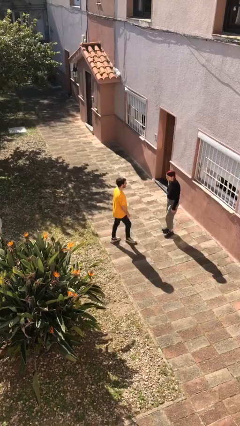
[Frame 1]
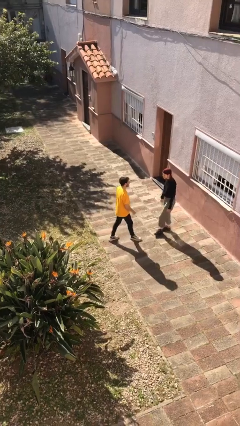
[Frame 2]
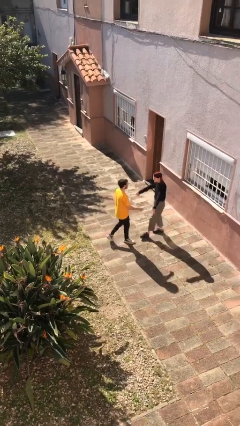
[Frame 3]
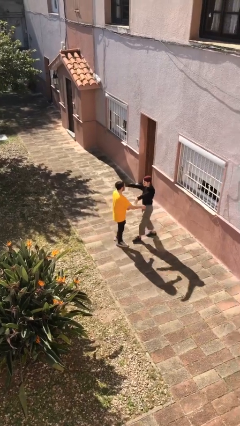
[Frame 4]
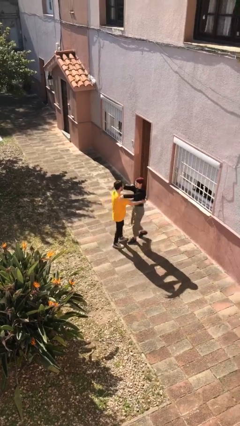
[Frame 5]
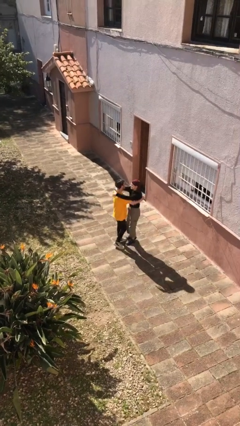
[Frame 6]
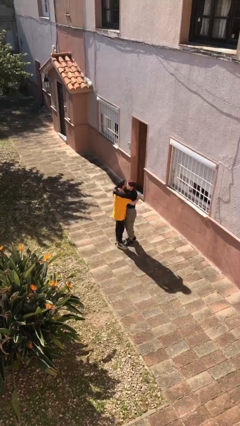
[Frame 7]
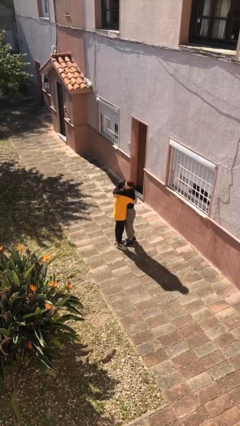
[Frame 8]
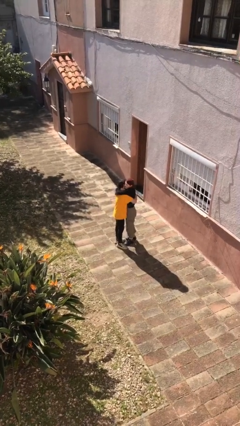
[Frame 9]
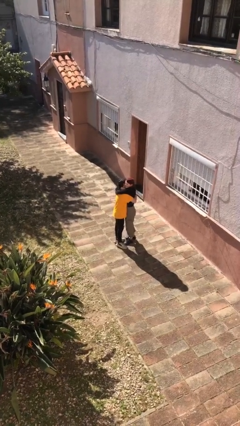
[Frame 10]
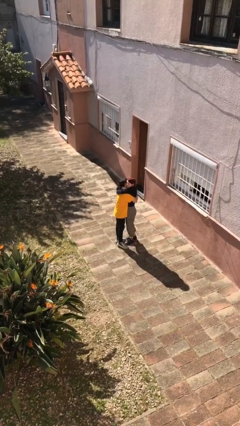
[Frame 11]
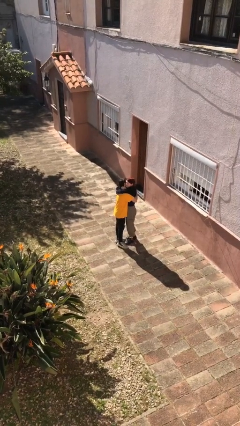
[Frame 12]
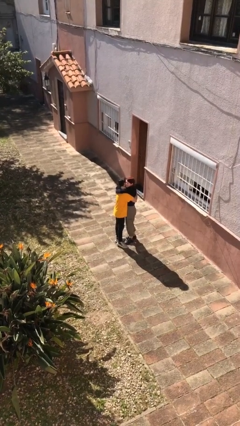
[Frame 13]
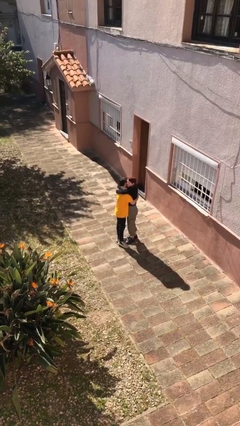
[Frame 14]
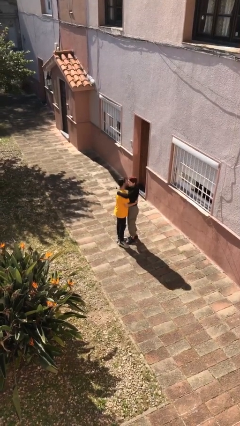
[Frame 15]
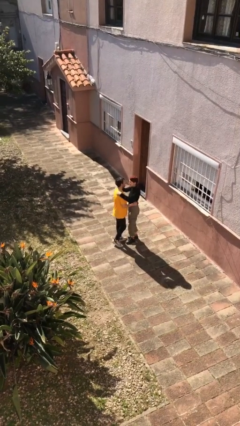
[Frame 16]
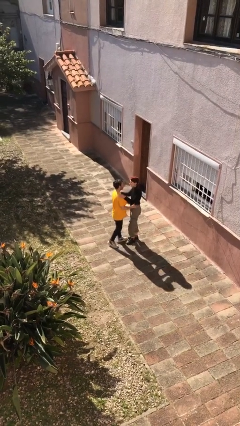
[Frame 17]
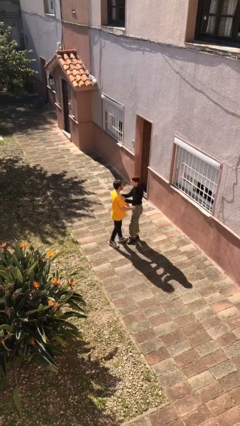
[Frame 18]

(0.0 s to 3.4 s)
person embraces person

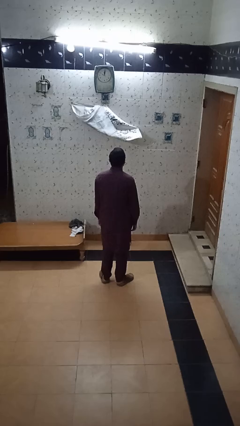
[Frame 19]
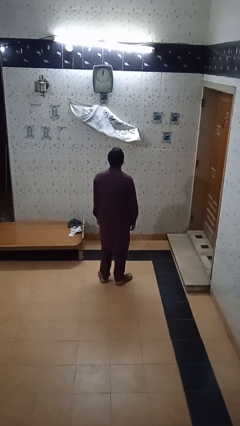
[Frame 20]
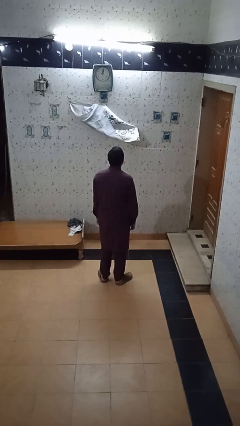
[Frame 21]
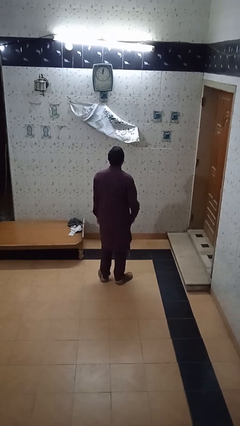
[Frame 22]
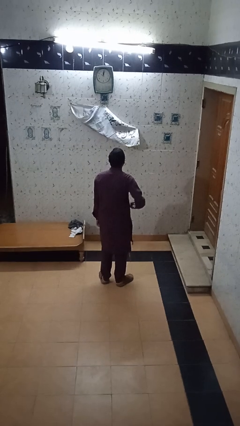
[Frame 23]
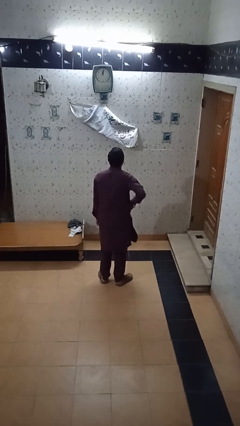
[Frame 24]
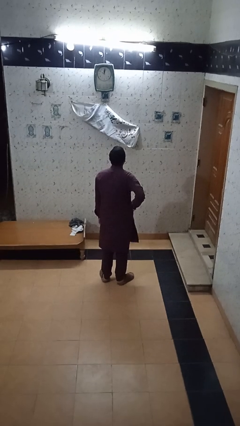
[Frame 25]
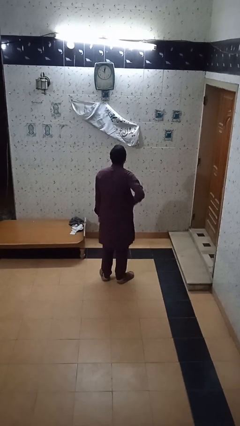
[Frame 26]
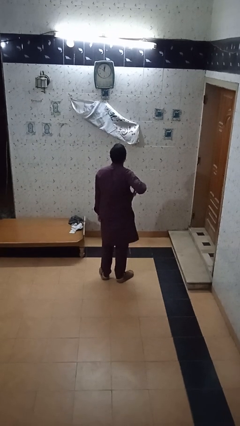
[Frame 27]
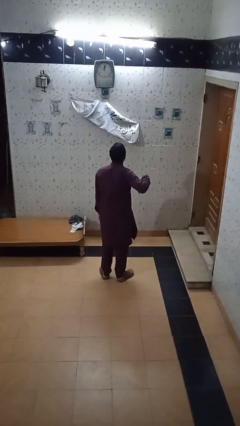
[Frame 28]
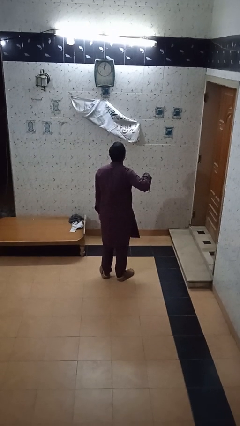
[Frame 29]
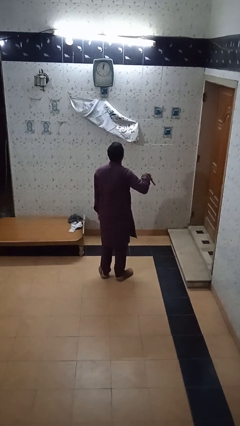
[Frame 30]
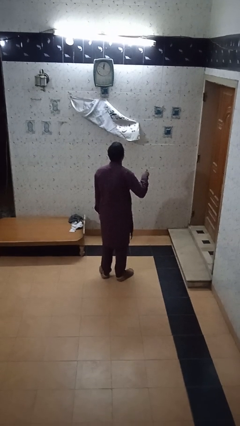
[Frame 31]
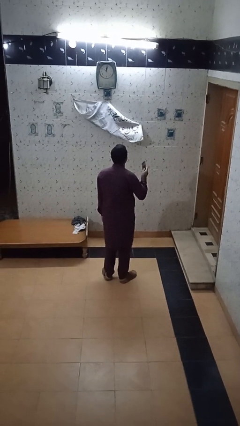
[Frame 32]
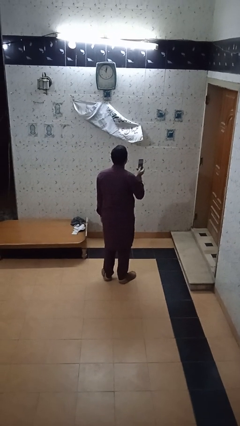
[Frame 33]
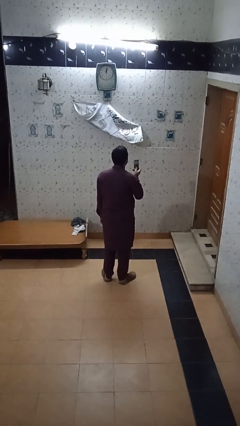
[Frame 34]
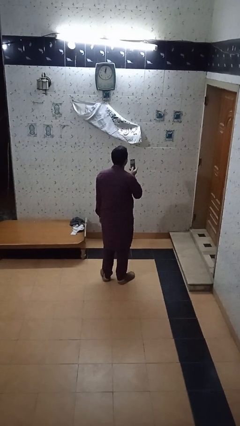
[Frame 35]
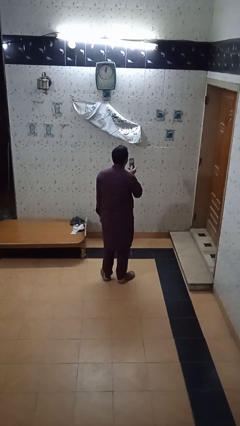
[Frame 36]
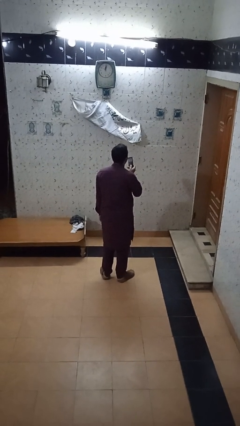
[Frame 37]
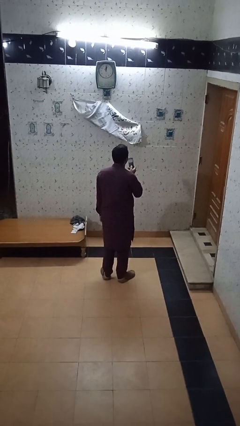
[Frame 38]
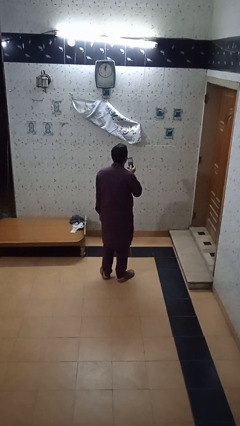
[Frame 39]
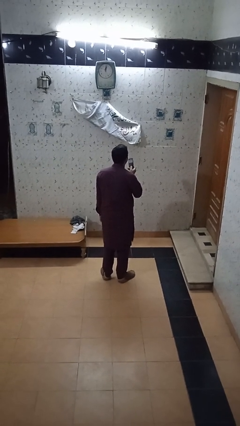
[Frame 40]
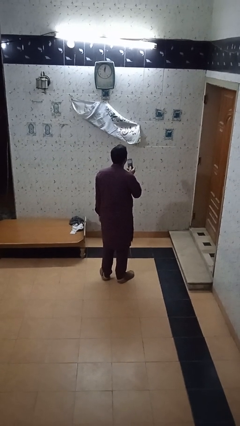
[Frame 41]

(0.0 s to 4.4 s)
person takes phone from pocket

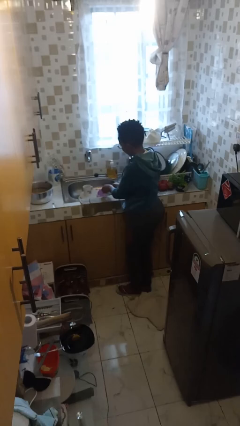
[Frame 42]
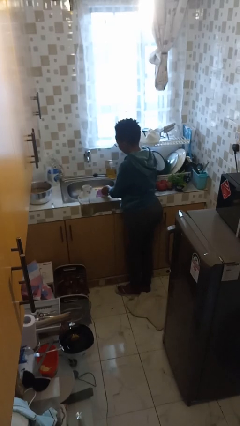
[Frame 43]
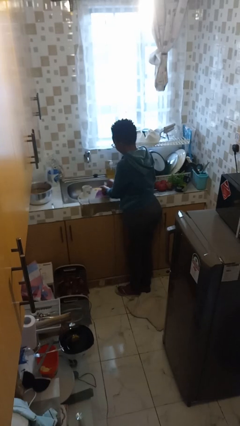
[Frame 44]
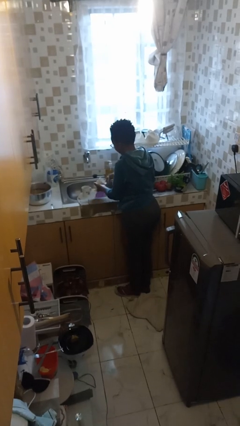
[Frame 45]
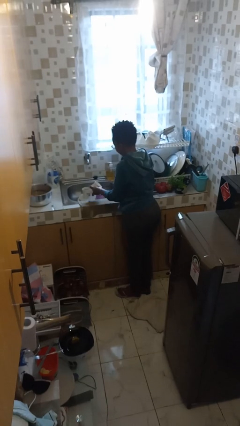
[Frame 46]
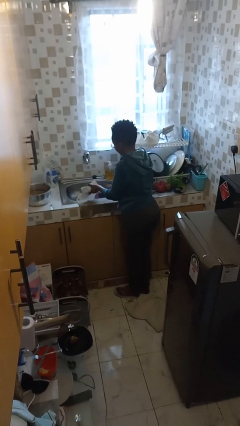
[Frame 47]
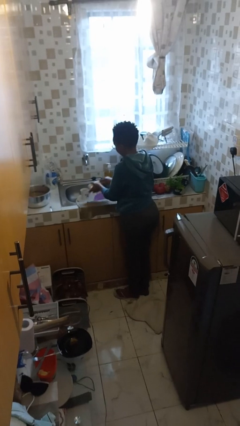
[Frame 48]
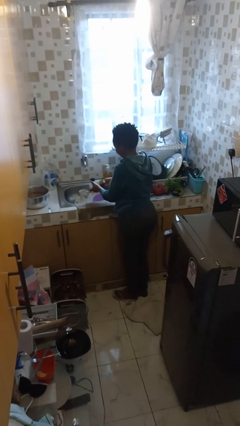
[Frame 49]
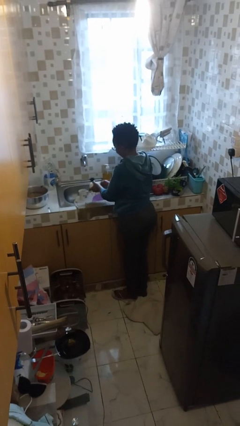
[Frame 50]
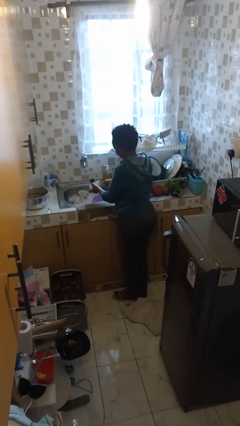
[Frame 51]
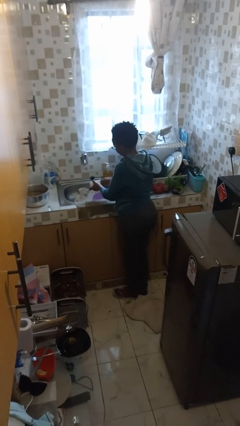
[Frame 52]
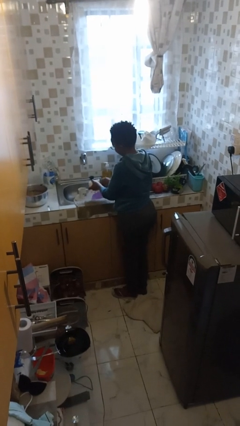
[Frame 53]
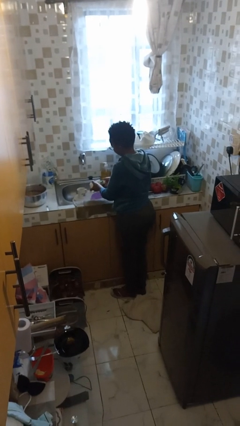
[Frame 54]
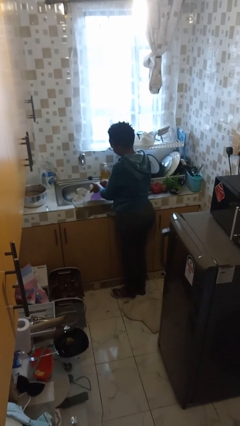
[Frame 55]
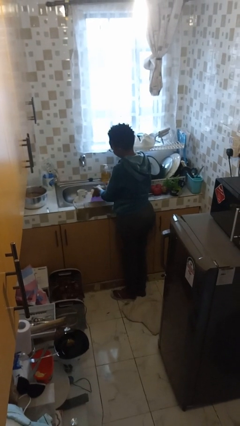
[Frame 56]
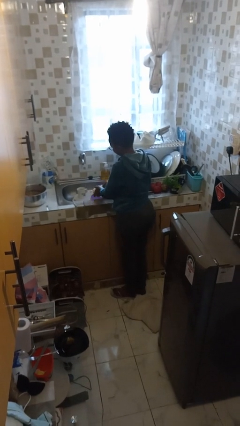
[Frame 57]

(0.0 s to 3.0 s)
person washes dish

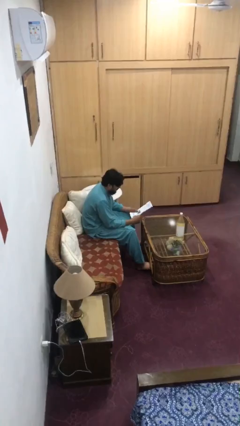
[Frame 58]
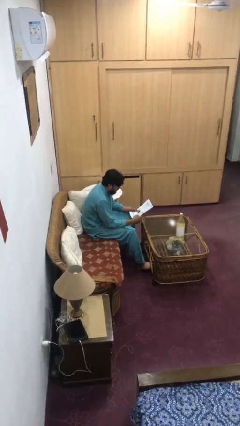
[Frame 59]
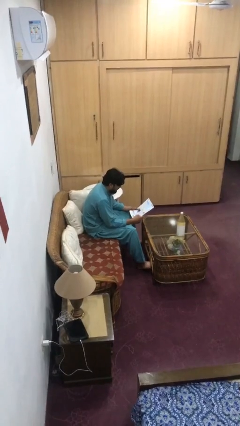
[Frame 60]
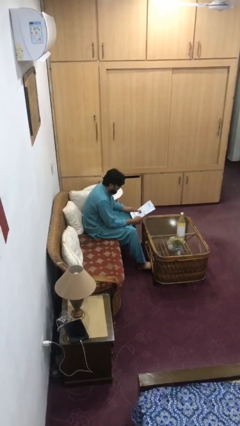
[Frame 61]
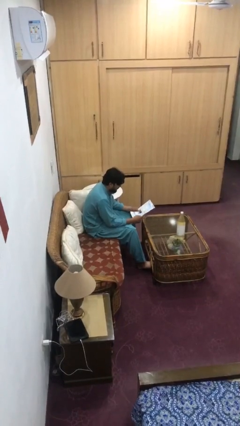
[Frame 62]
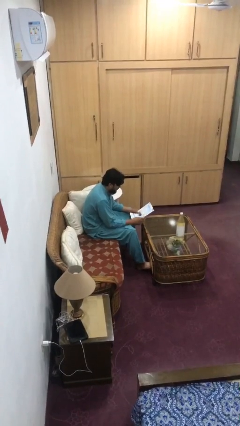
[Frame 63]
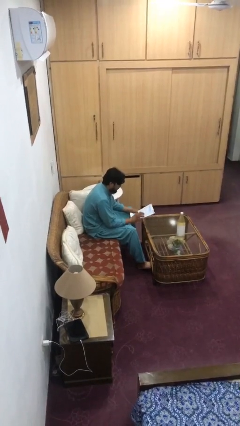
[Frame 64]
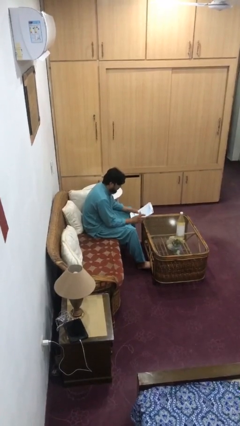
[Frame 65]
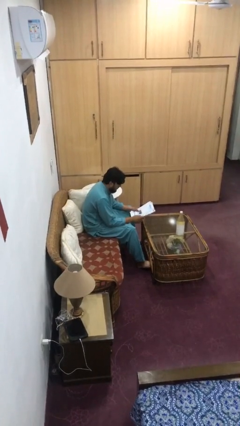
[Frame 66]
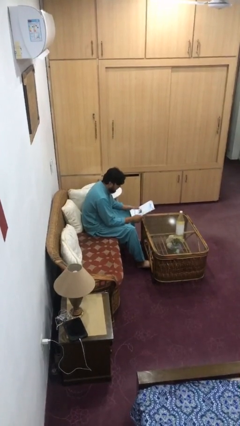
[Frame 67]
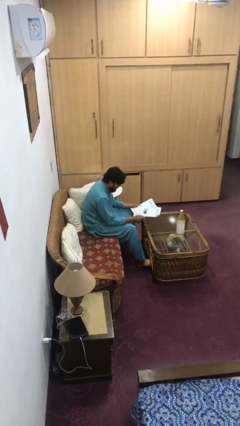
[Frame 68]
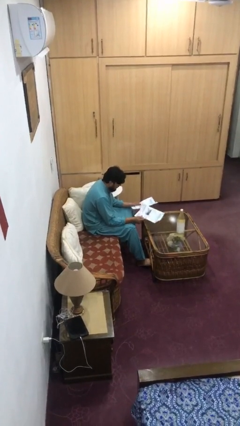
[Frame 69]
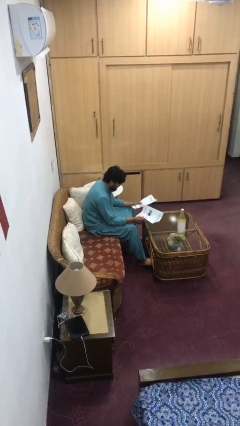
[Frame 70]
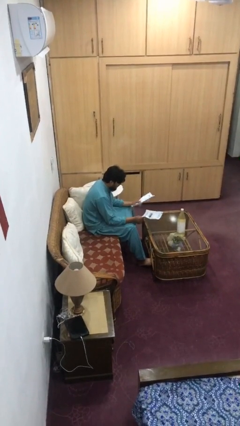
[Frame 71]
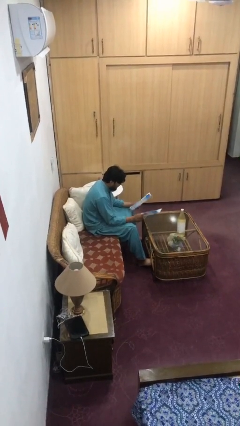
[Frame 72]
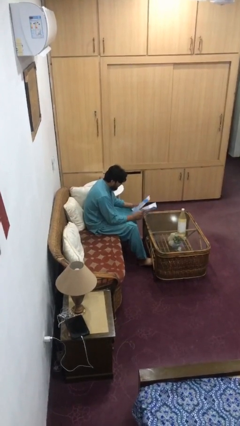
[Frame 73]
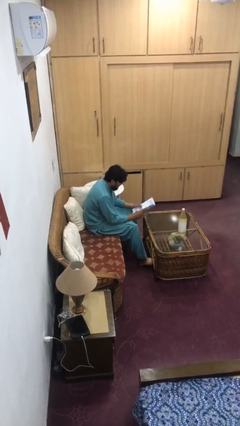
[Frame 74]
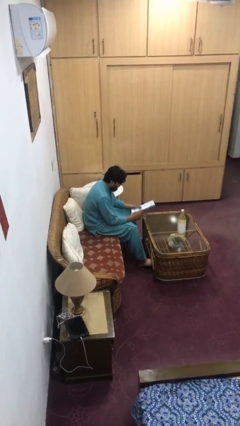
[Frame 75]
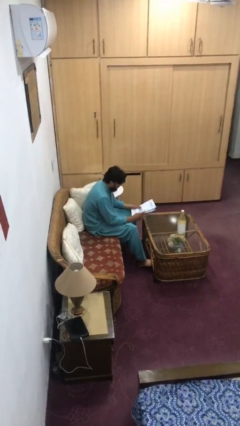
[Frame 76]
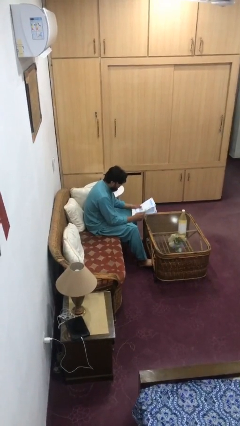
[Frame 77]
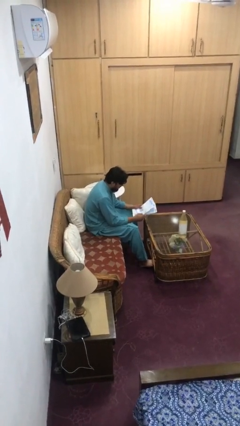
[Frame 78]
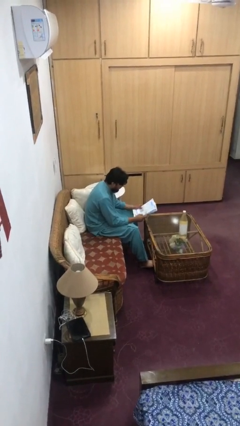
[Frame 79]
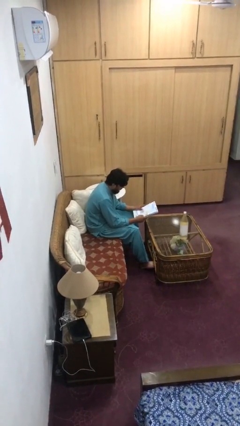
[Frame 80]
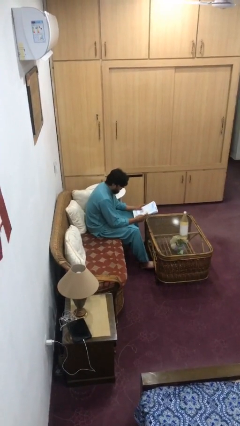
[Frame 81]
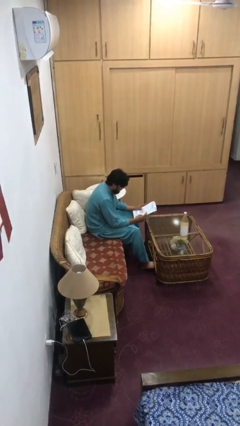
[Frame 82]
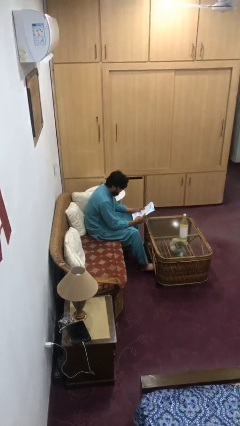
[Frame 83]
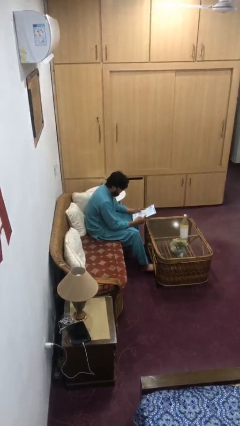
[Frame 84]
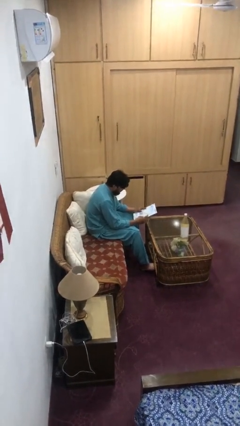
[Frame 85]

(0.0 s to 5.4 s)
person reads document

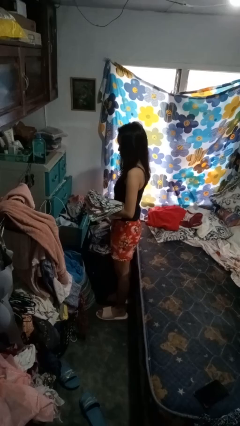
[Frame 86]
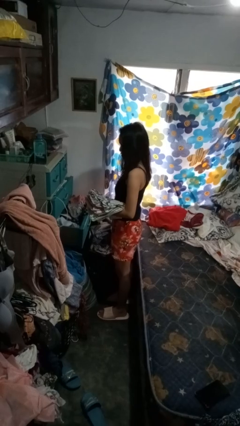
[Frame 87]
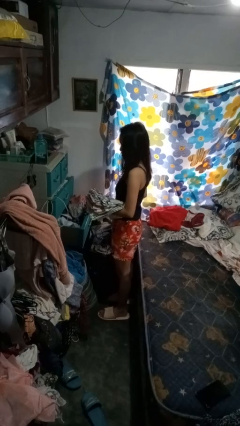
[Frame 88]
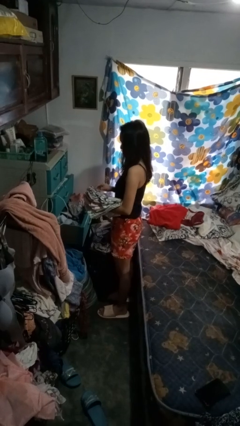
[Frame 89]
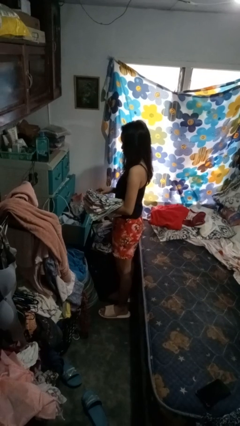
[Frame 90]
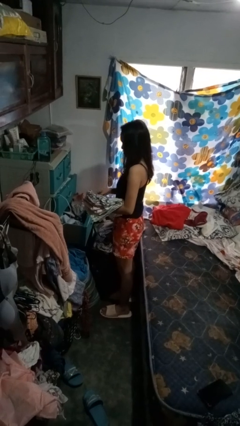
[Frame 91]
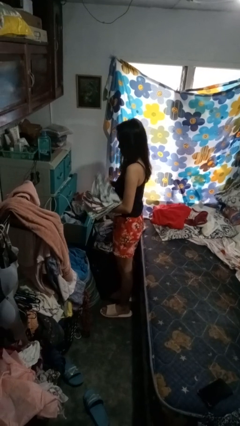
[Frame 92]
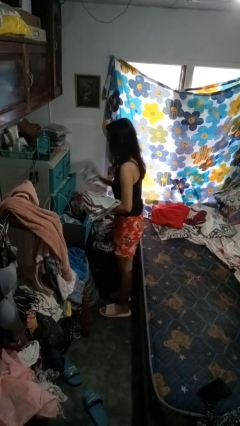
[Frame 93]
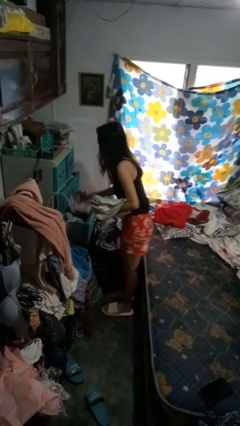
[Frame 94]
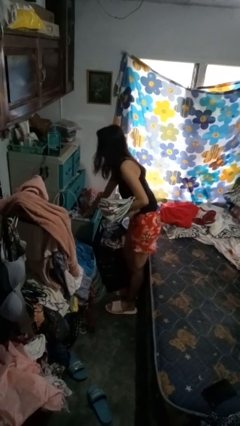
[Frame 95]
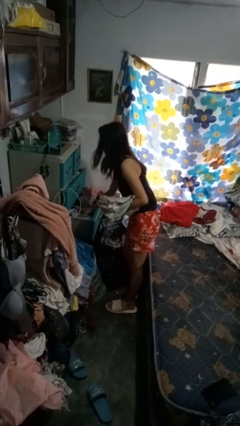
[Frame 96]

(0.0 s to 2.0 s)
person puts clothes into dresser
